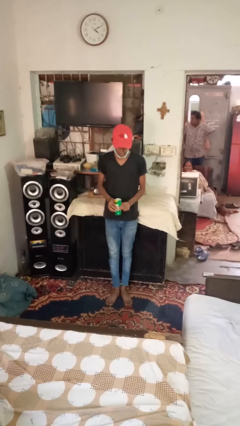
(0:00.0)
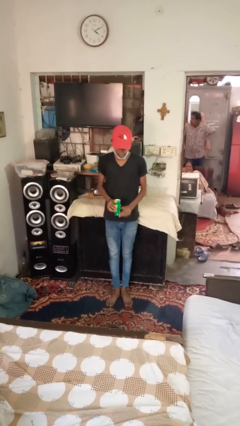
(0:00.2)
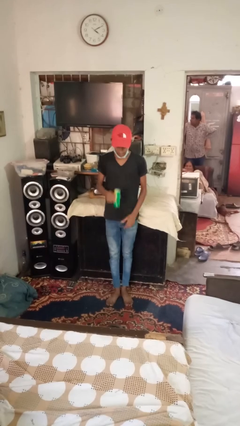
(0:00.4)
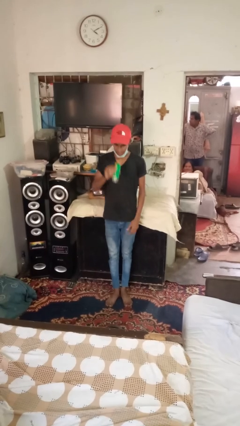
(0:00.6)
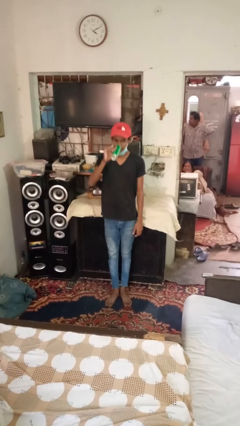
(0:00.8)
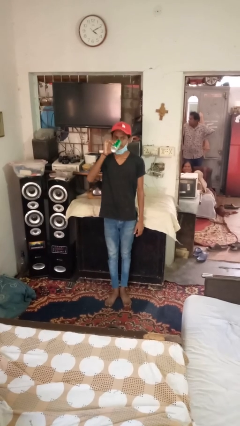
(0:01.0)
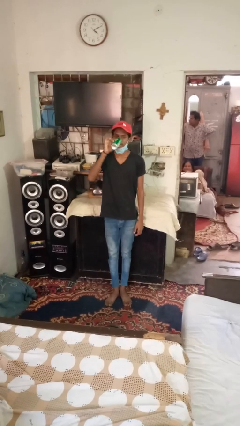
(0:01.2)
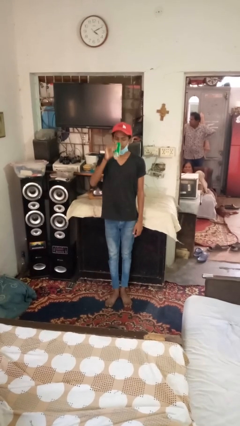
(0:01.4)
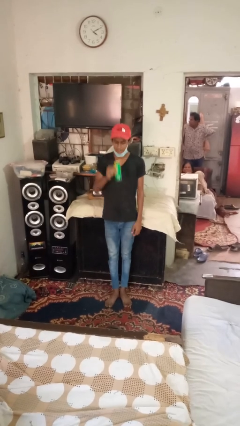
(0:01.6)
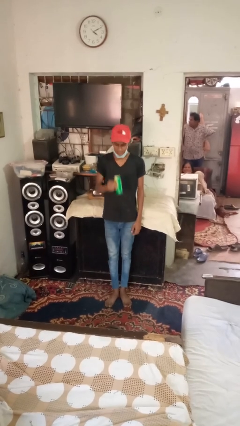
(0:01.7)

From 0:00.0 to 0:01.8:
person drinks from beverage can

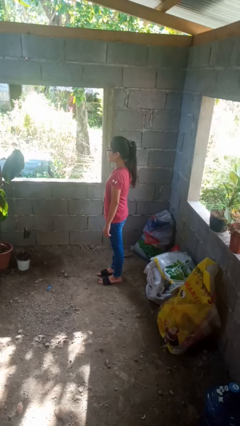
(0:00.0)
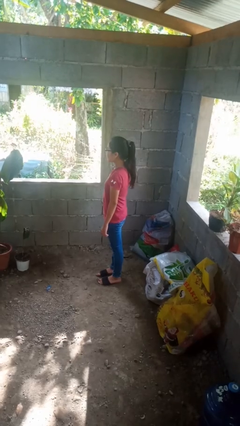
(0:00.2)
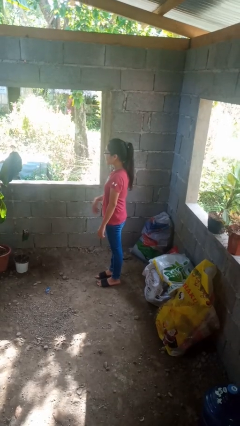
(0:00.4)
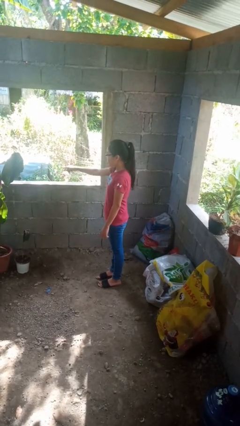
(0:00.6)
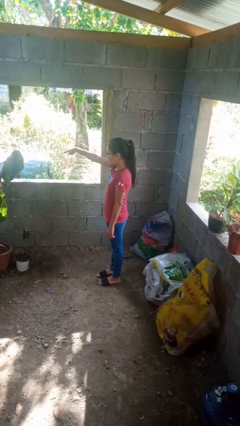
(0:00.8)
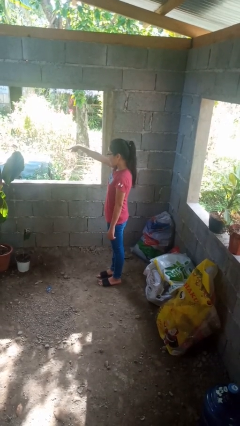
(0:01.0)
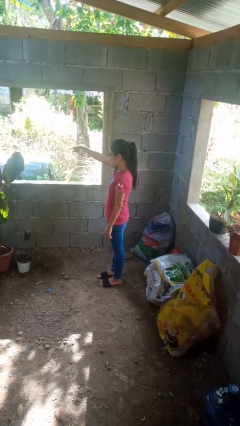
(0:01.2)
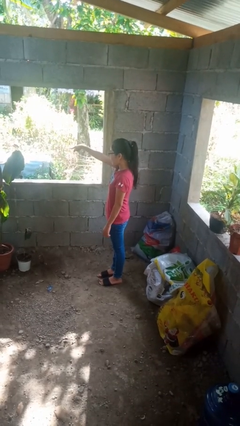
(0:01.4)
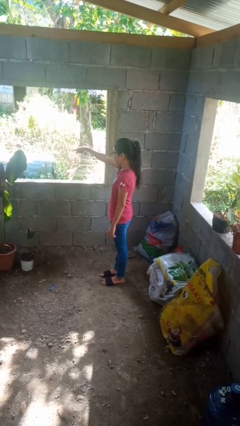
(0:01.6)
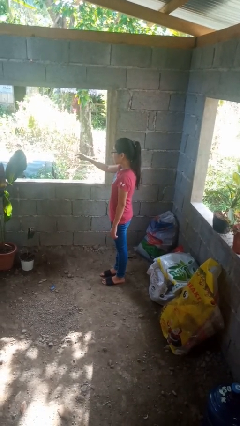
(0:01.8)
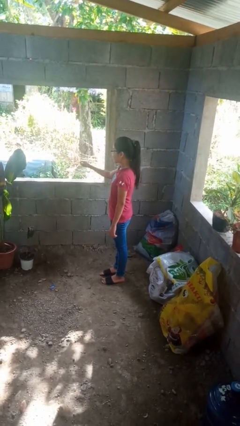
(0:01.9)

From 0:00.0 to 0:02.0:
person points at person

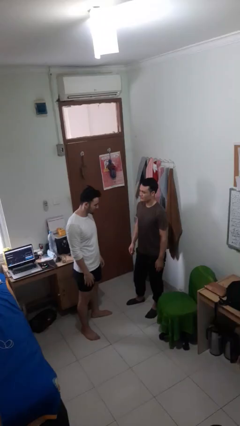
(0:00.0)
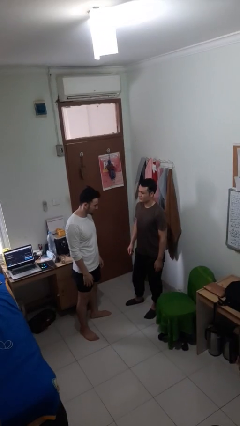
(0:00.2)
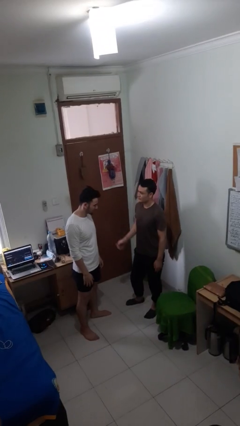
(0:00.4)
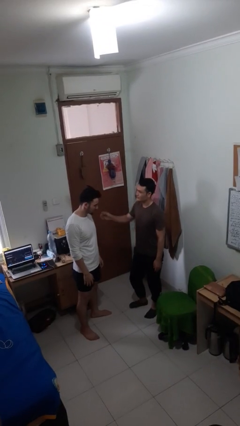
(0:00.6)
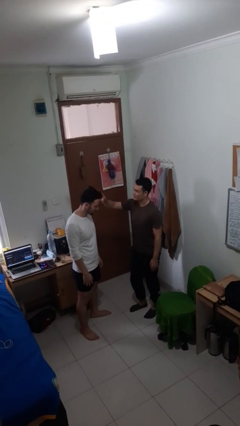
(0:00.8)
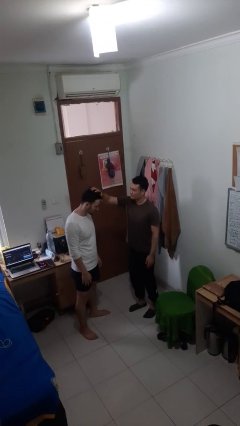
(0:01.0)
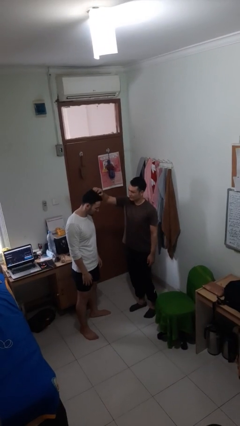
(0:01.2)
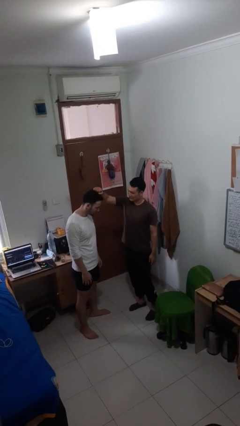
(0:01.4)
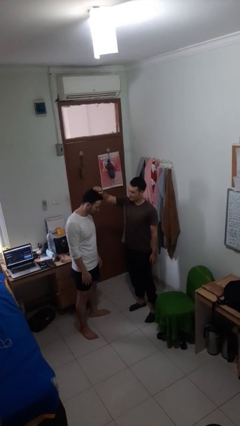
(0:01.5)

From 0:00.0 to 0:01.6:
person grabs person by hair

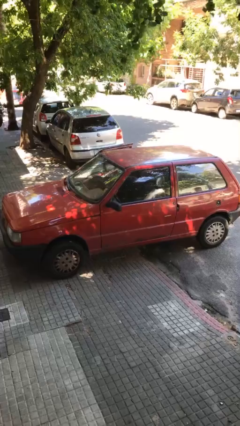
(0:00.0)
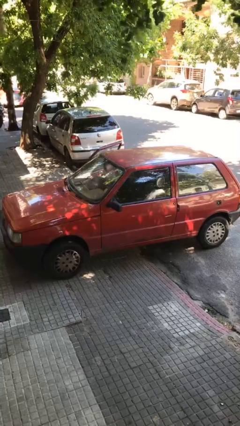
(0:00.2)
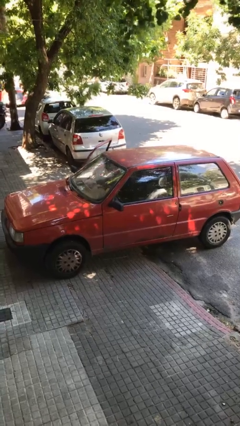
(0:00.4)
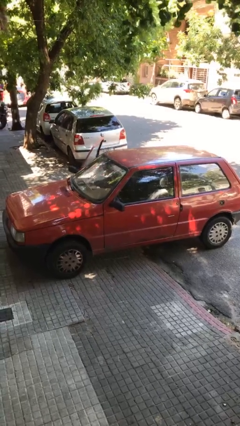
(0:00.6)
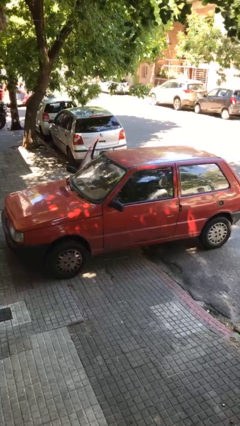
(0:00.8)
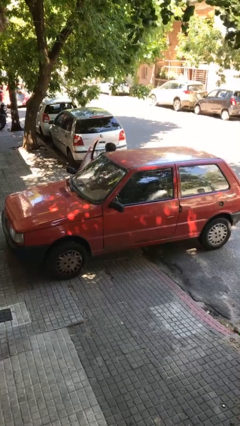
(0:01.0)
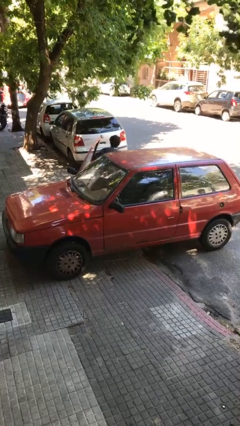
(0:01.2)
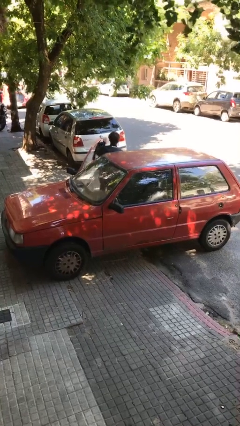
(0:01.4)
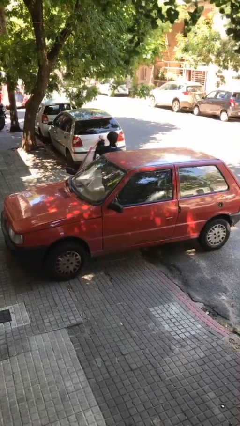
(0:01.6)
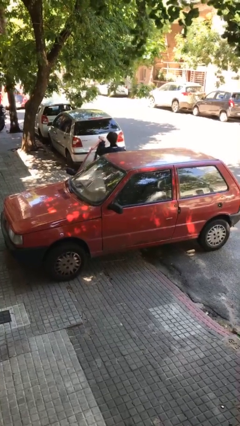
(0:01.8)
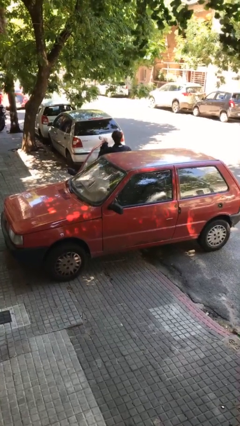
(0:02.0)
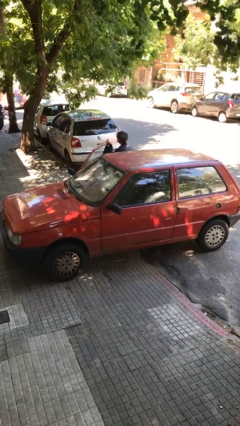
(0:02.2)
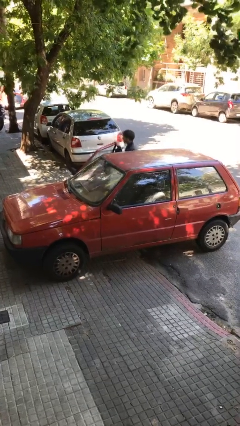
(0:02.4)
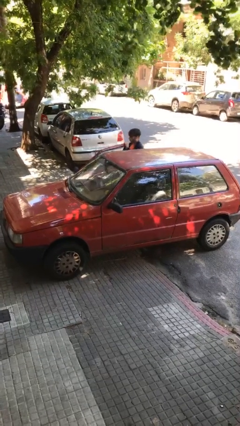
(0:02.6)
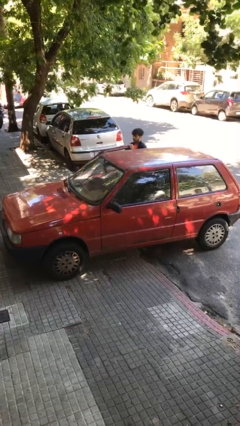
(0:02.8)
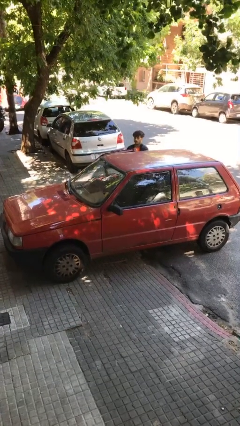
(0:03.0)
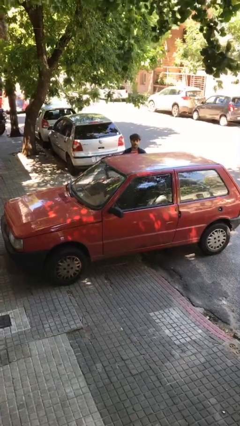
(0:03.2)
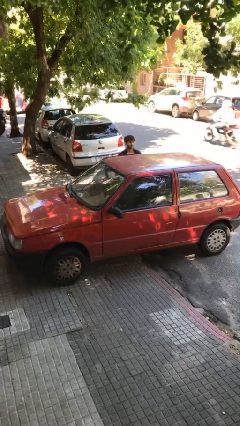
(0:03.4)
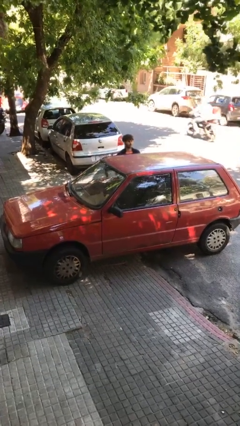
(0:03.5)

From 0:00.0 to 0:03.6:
car drops off person

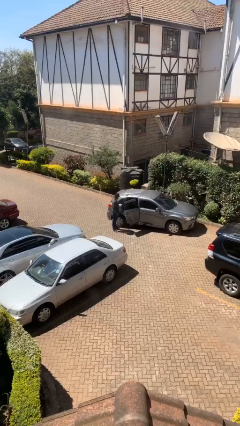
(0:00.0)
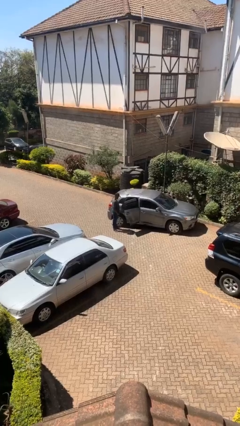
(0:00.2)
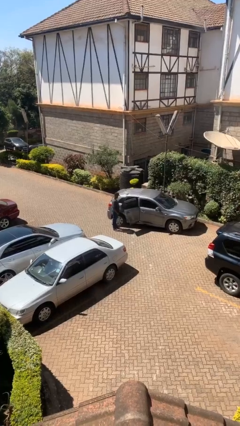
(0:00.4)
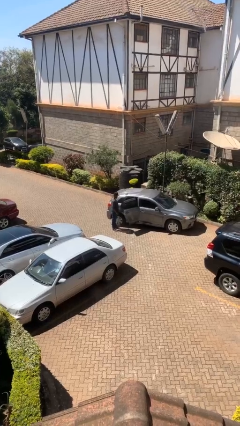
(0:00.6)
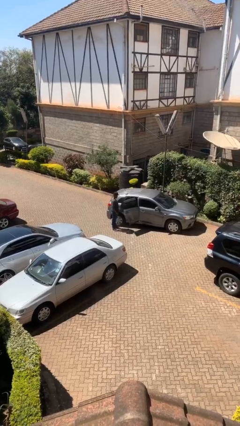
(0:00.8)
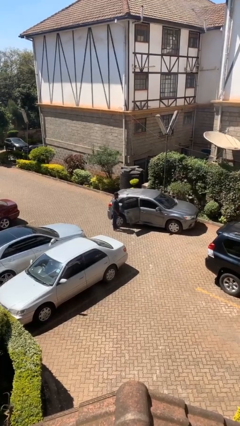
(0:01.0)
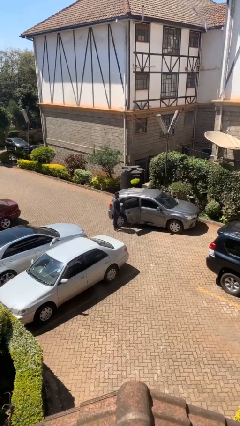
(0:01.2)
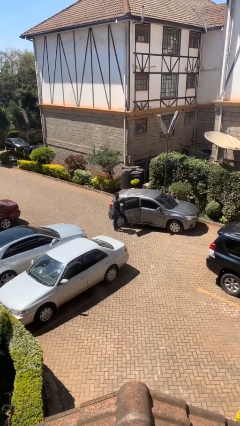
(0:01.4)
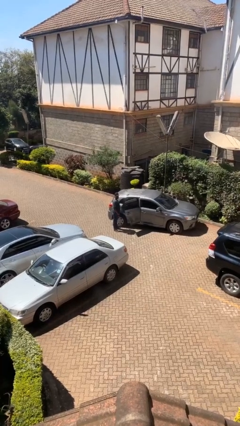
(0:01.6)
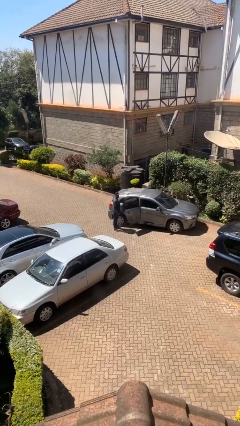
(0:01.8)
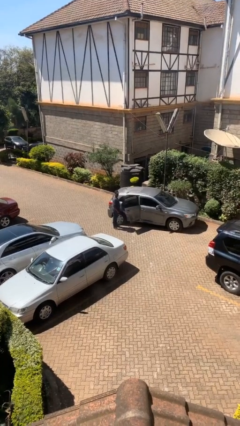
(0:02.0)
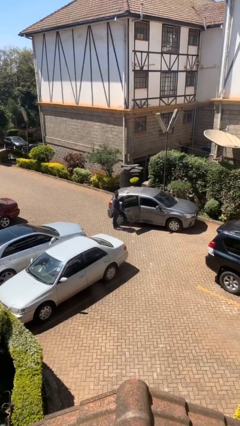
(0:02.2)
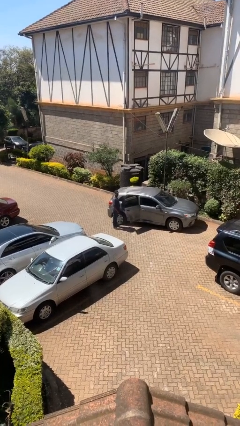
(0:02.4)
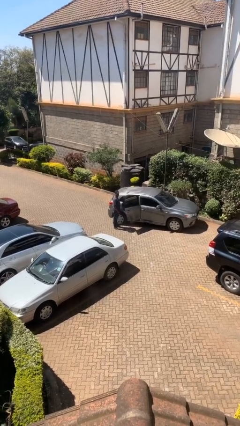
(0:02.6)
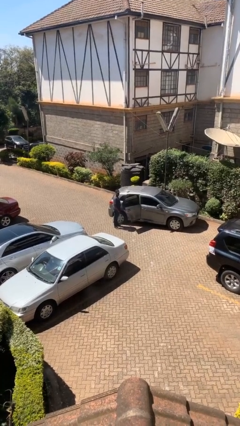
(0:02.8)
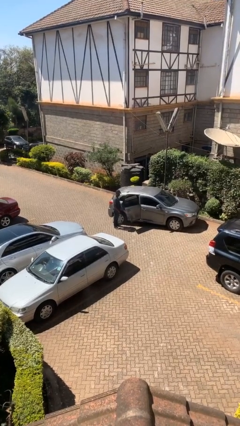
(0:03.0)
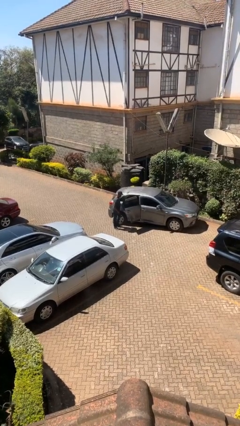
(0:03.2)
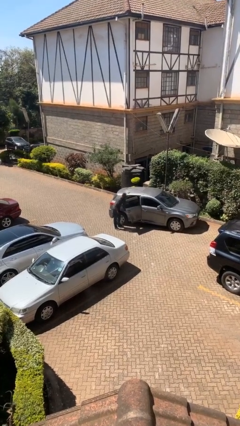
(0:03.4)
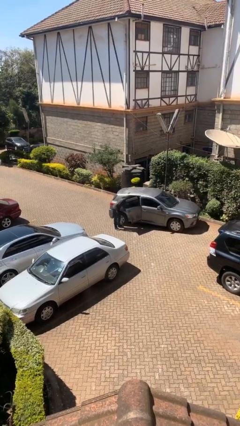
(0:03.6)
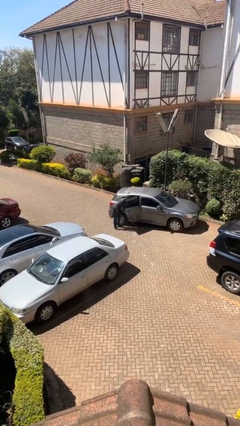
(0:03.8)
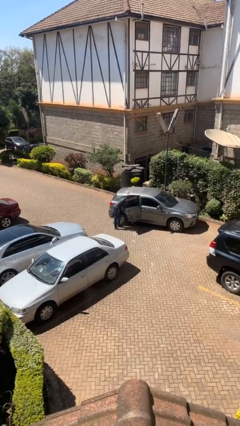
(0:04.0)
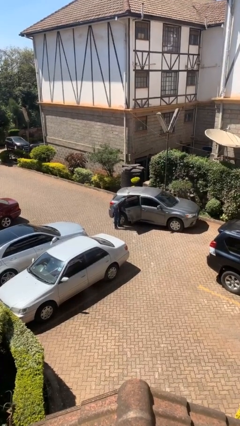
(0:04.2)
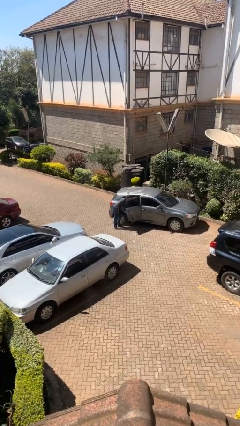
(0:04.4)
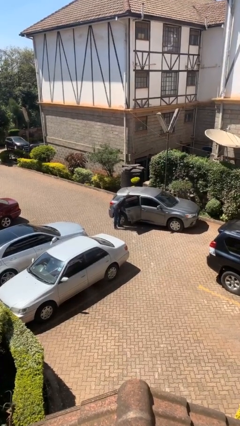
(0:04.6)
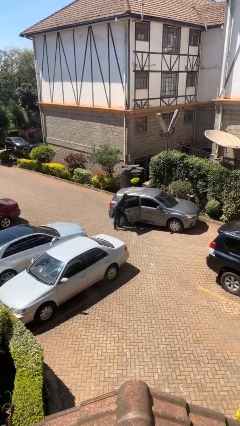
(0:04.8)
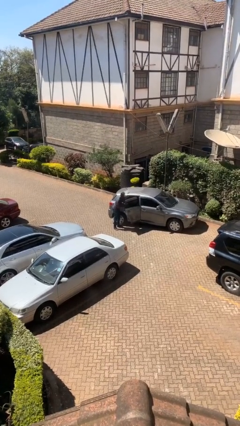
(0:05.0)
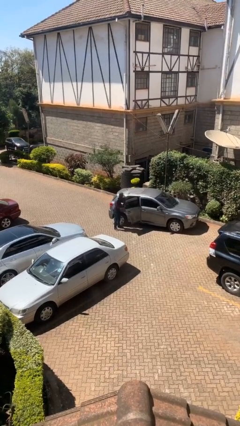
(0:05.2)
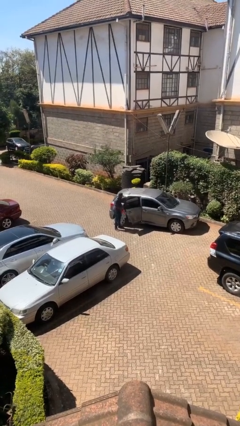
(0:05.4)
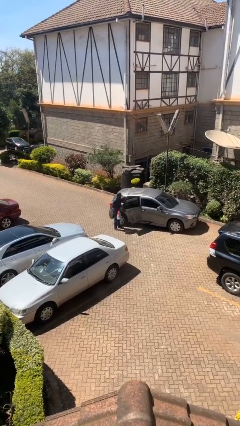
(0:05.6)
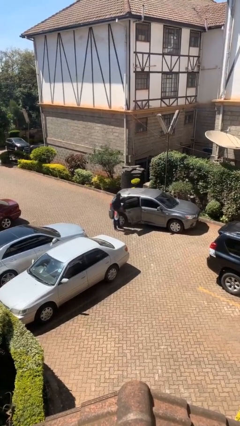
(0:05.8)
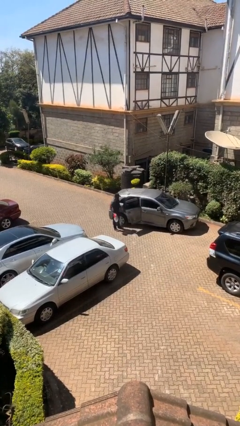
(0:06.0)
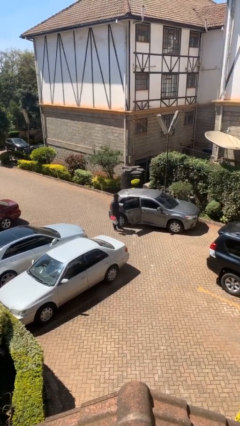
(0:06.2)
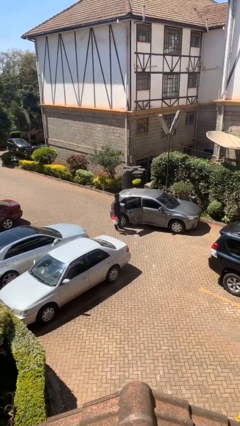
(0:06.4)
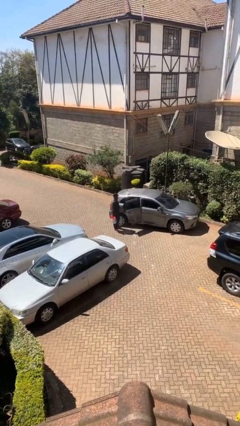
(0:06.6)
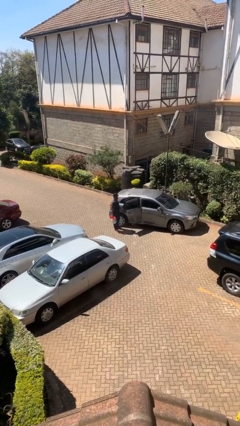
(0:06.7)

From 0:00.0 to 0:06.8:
person unloads car

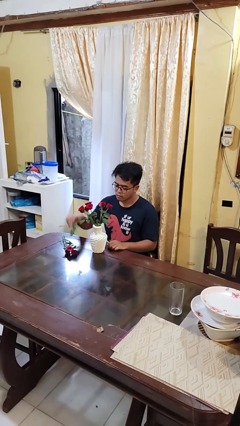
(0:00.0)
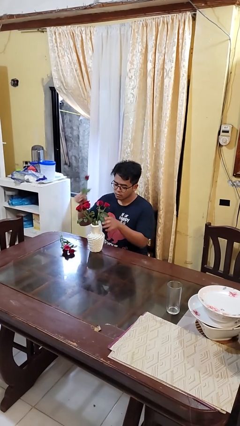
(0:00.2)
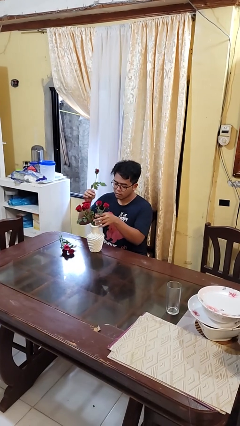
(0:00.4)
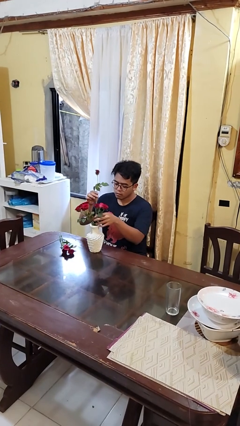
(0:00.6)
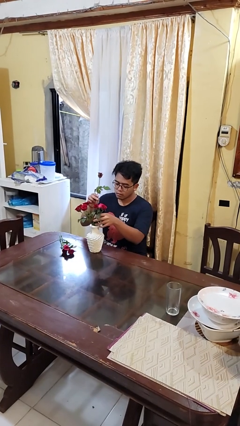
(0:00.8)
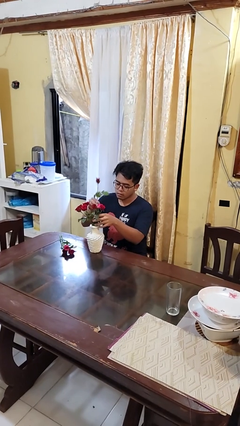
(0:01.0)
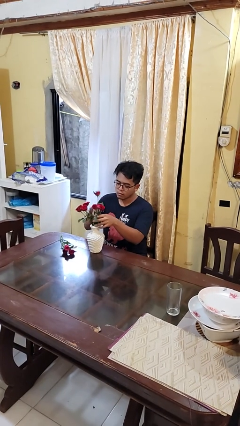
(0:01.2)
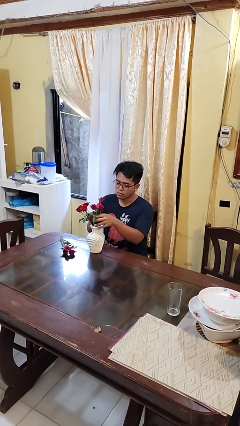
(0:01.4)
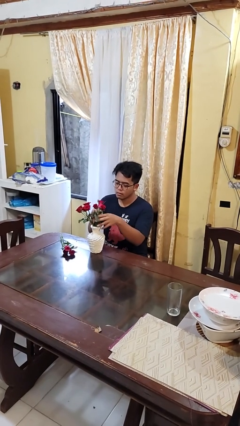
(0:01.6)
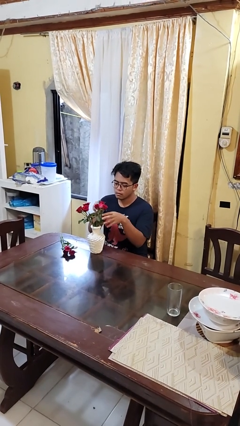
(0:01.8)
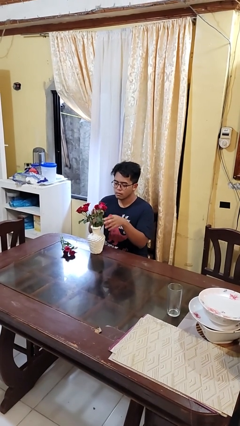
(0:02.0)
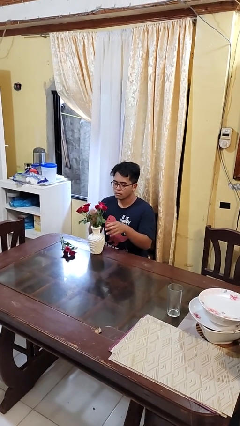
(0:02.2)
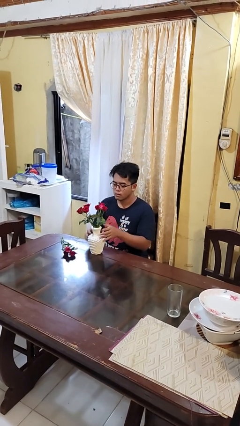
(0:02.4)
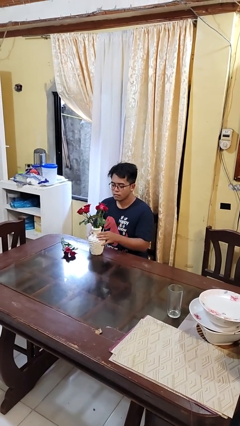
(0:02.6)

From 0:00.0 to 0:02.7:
person arranges flowers in vase
